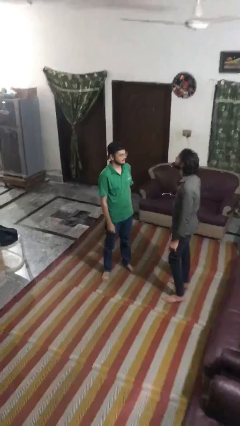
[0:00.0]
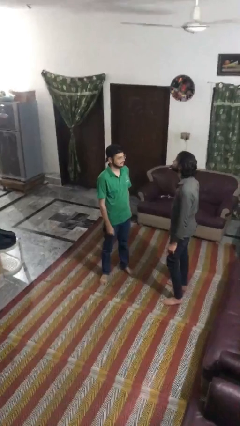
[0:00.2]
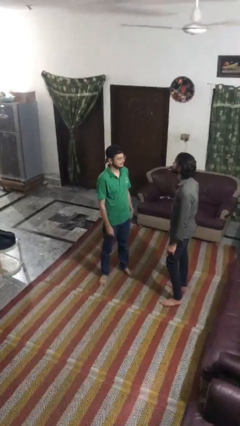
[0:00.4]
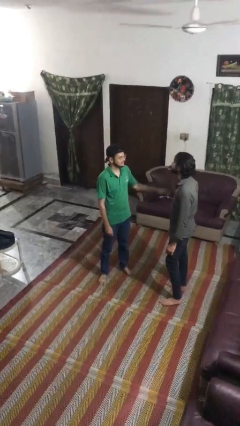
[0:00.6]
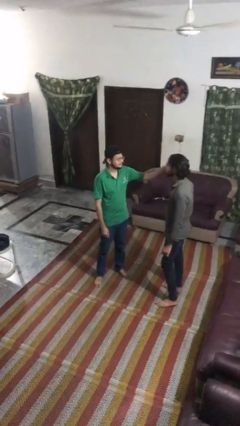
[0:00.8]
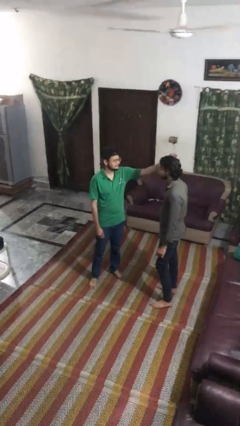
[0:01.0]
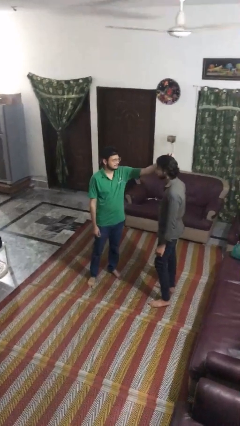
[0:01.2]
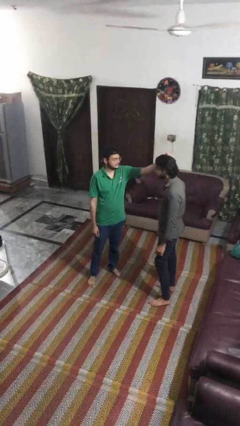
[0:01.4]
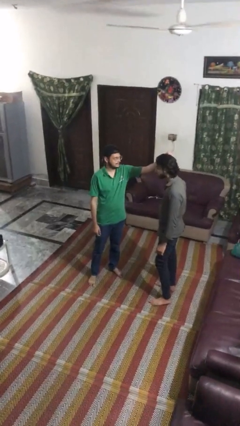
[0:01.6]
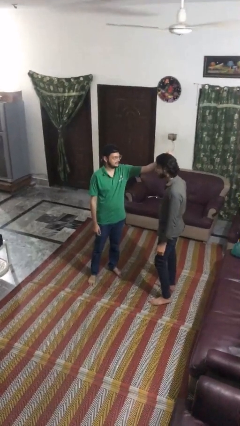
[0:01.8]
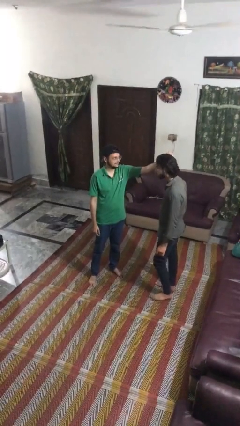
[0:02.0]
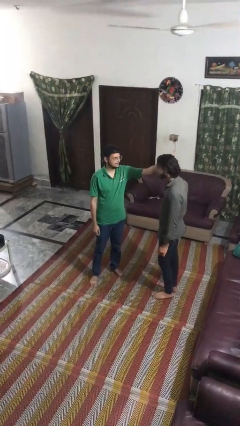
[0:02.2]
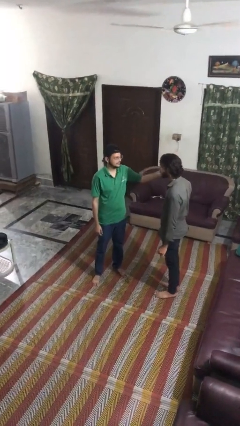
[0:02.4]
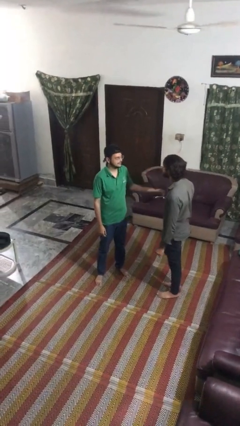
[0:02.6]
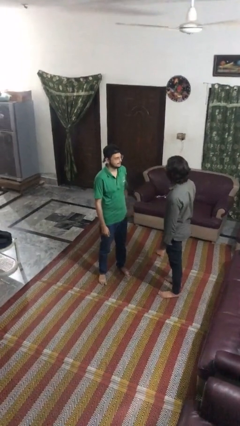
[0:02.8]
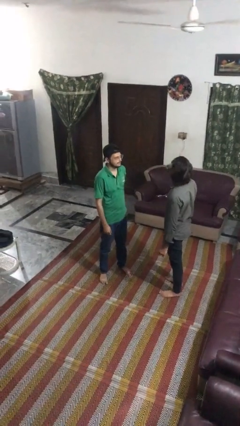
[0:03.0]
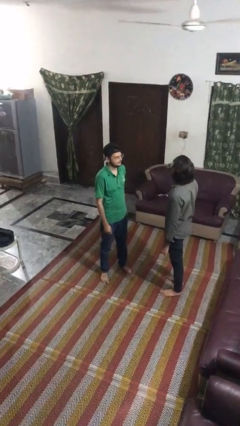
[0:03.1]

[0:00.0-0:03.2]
person grabs person by hair

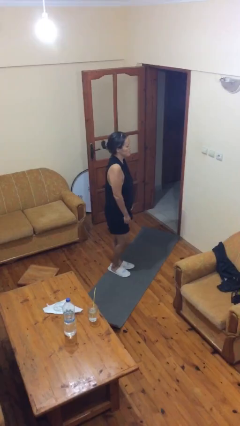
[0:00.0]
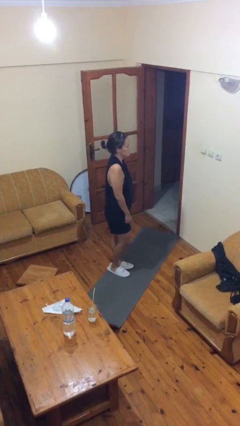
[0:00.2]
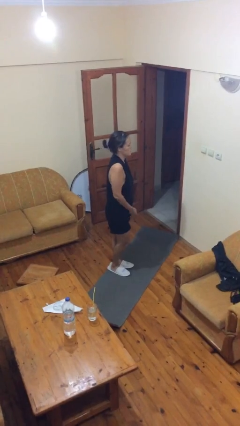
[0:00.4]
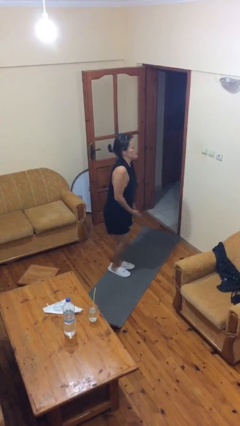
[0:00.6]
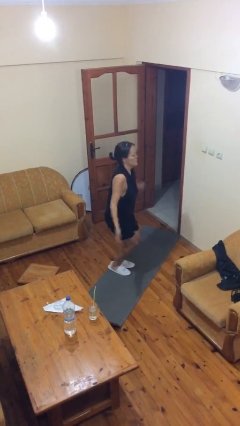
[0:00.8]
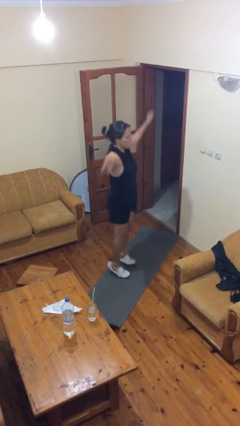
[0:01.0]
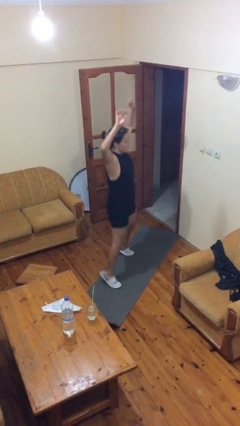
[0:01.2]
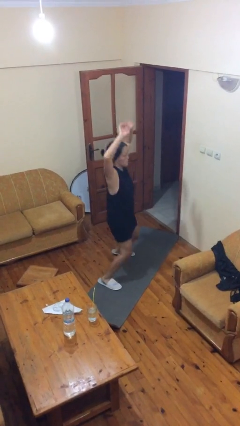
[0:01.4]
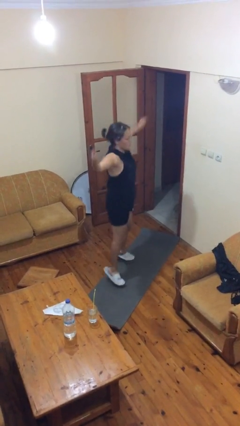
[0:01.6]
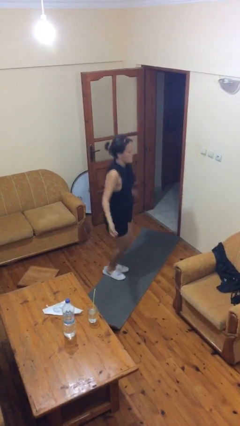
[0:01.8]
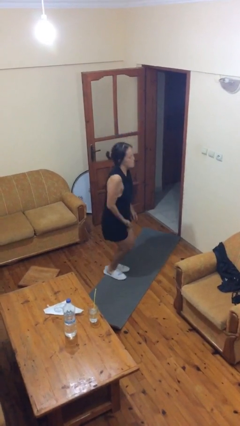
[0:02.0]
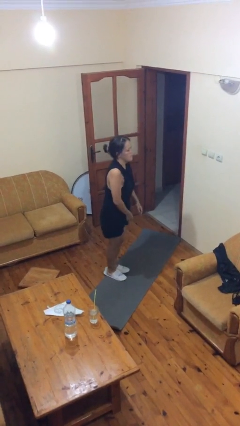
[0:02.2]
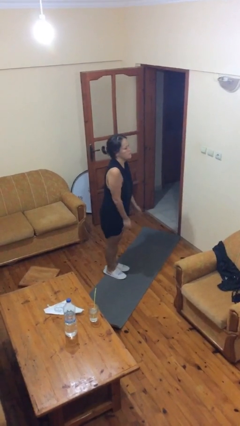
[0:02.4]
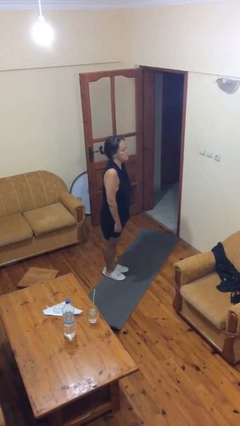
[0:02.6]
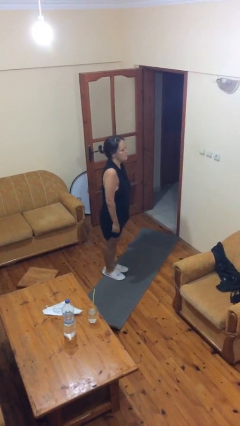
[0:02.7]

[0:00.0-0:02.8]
person exercises with jumping jacks

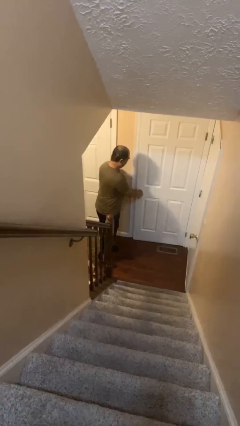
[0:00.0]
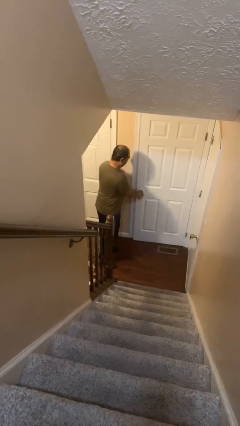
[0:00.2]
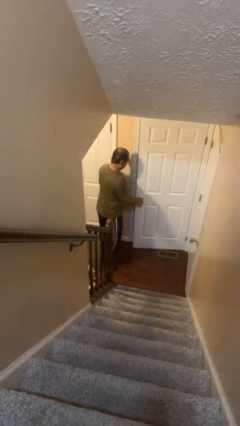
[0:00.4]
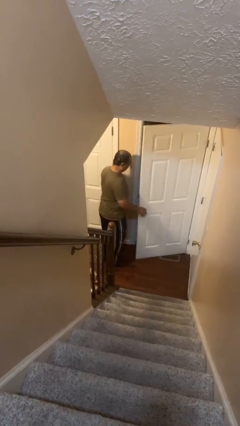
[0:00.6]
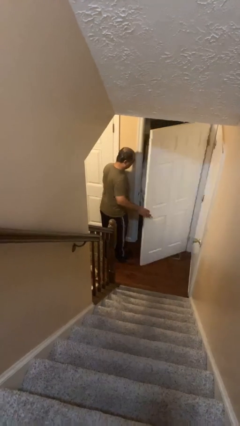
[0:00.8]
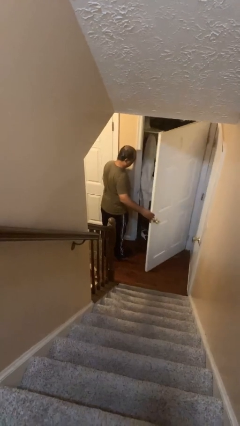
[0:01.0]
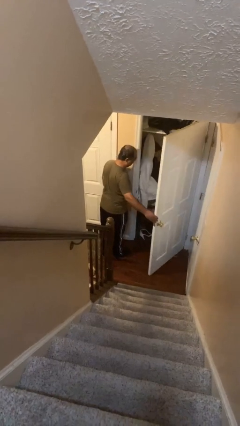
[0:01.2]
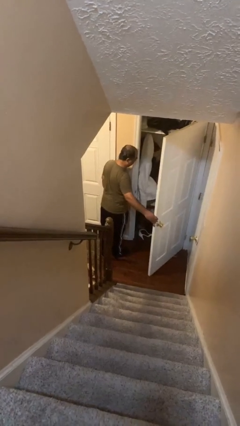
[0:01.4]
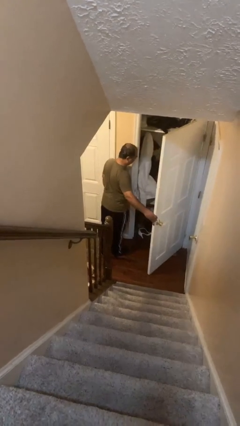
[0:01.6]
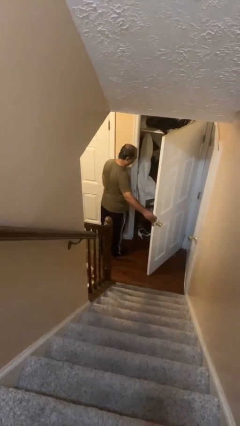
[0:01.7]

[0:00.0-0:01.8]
person opens facility door

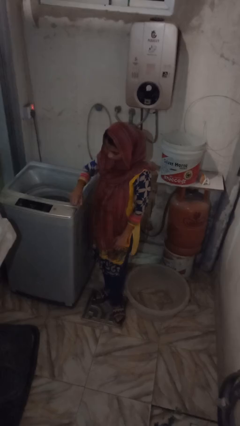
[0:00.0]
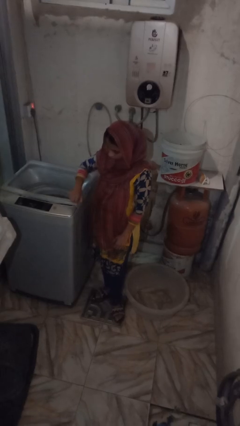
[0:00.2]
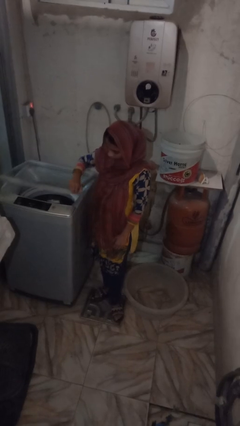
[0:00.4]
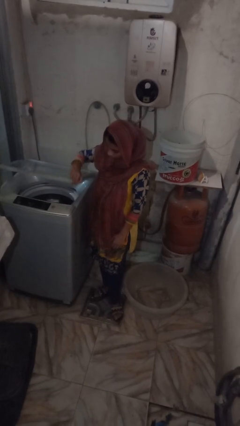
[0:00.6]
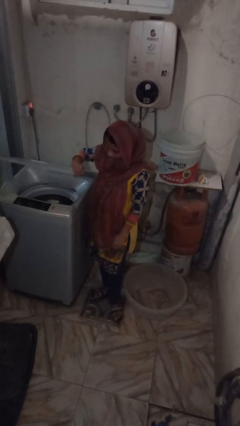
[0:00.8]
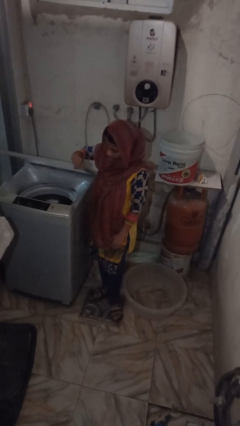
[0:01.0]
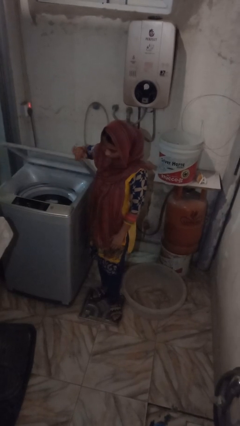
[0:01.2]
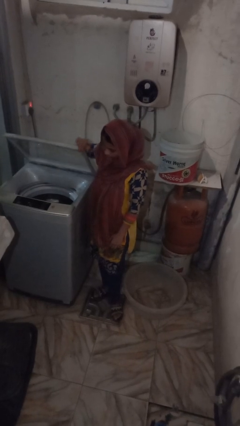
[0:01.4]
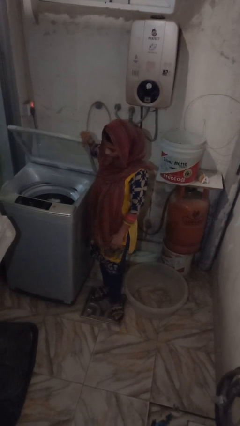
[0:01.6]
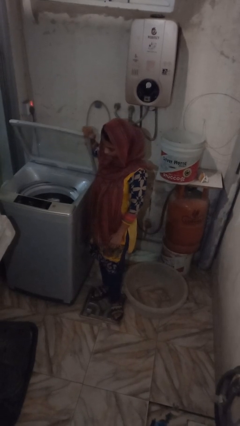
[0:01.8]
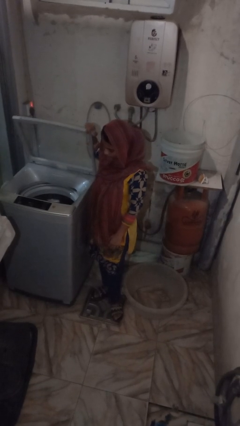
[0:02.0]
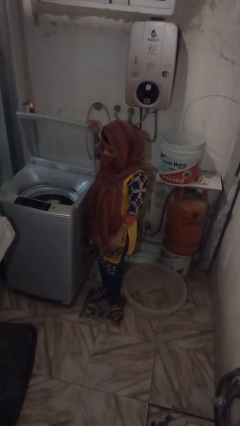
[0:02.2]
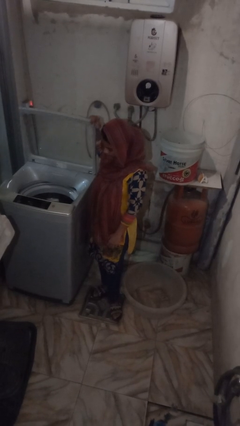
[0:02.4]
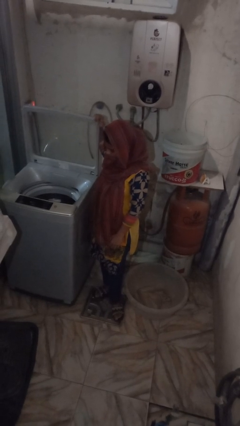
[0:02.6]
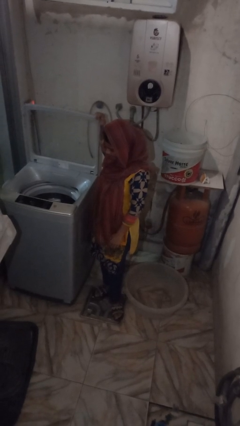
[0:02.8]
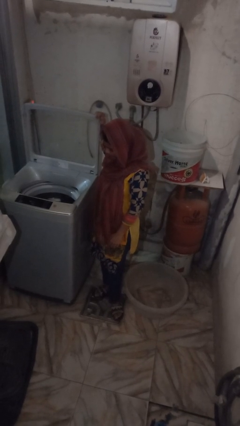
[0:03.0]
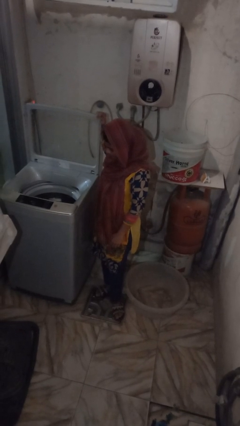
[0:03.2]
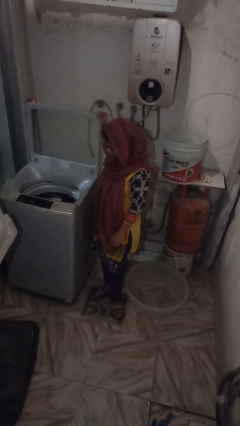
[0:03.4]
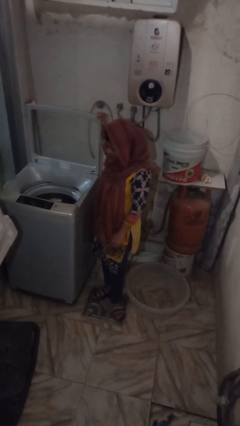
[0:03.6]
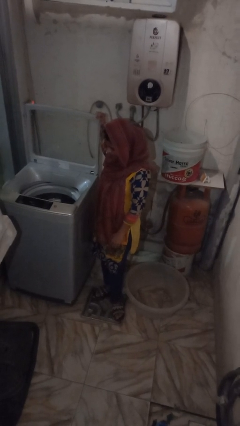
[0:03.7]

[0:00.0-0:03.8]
person opens clothes washer

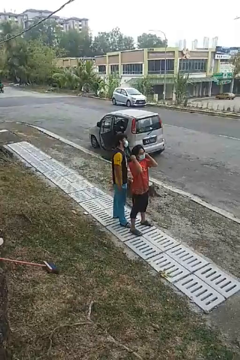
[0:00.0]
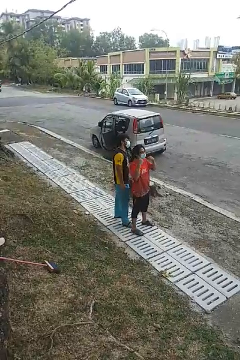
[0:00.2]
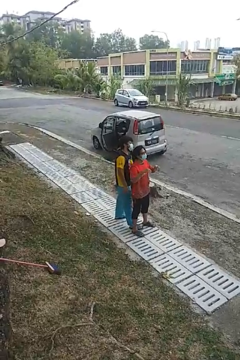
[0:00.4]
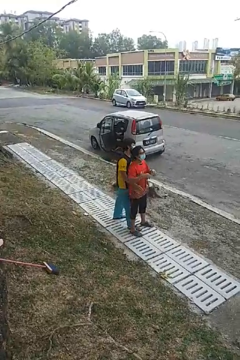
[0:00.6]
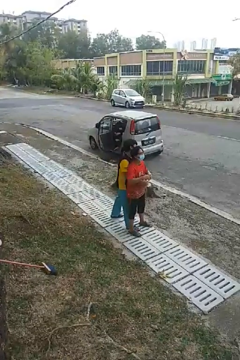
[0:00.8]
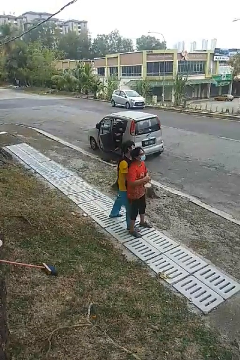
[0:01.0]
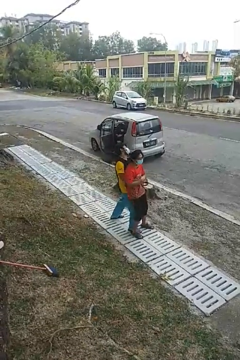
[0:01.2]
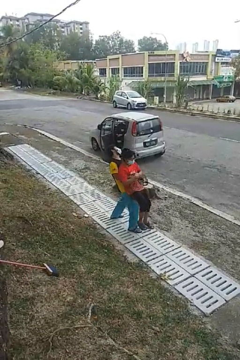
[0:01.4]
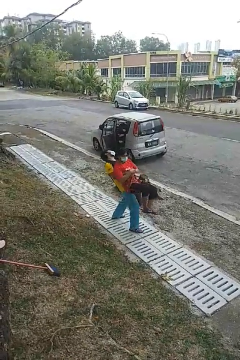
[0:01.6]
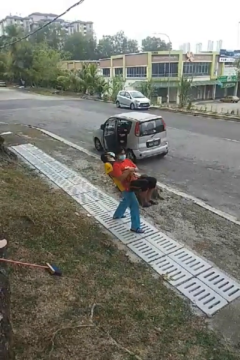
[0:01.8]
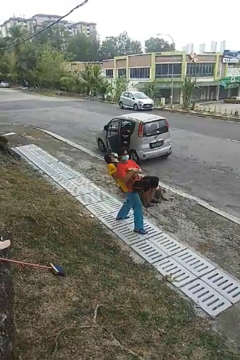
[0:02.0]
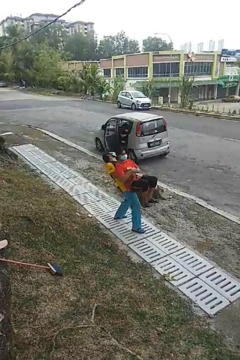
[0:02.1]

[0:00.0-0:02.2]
person picks up person

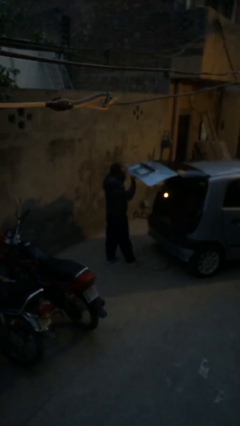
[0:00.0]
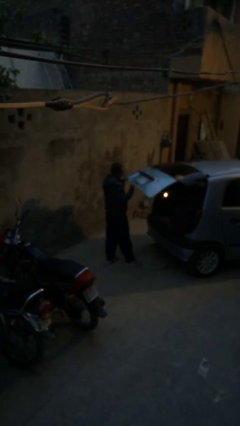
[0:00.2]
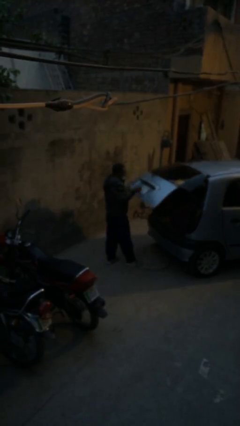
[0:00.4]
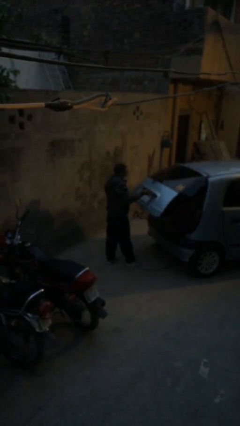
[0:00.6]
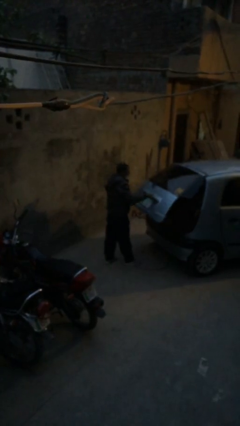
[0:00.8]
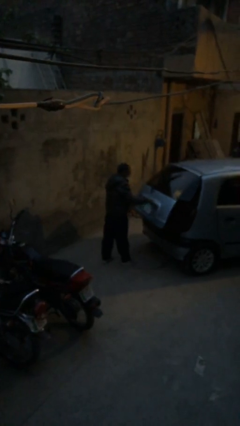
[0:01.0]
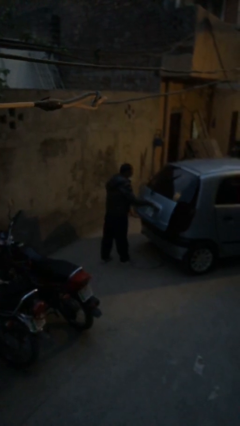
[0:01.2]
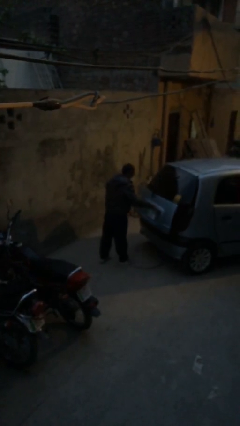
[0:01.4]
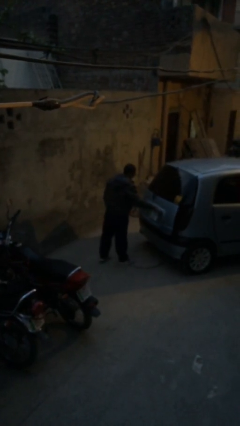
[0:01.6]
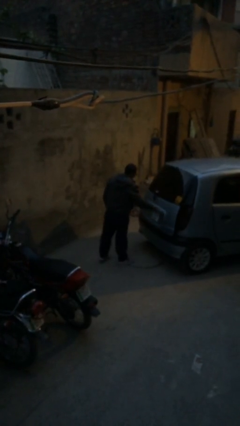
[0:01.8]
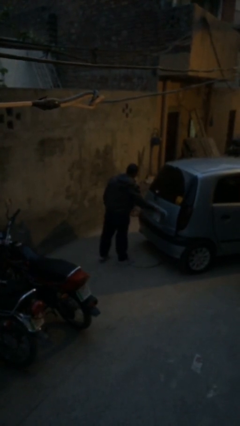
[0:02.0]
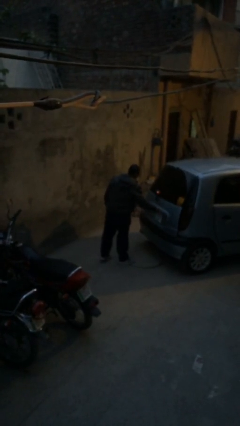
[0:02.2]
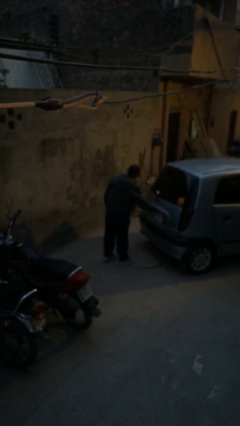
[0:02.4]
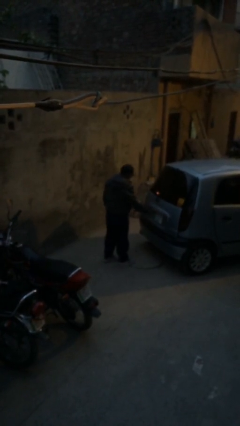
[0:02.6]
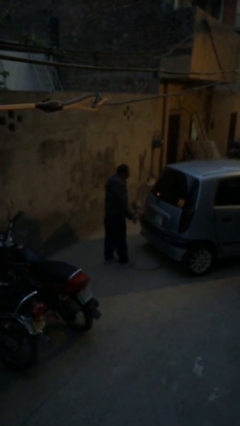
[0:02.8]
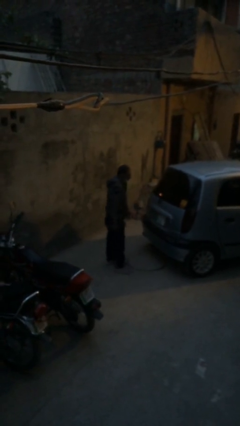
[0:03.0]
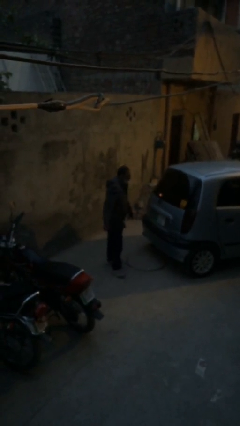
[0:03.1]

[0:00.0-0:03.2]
person closes car trunk

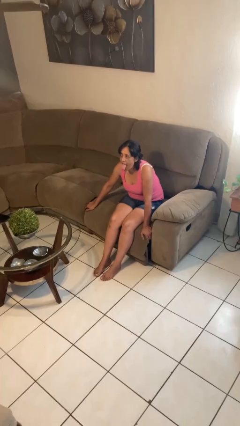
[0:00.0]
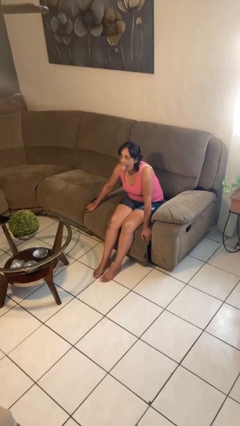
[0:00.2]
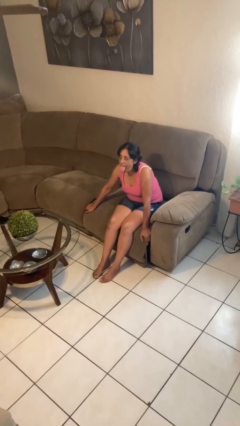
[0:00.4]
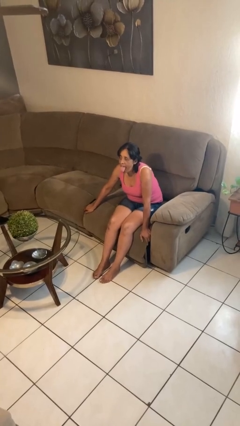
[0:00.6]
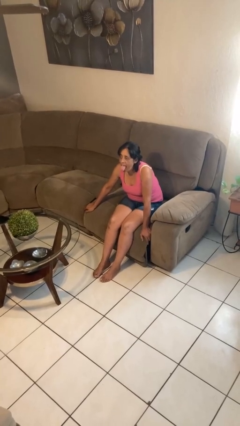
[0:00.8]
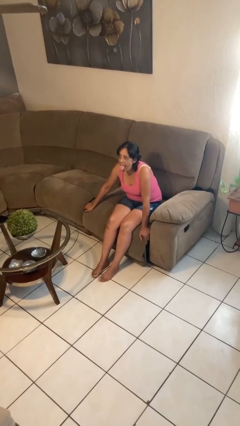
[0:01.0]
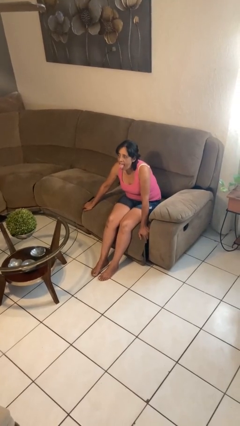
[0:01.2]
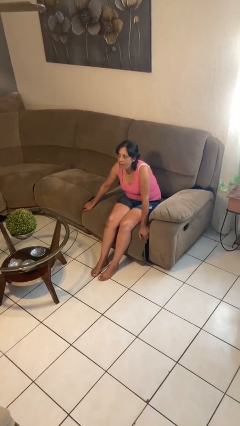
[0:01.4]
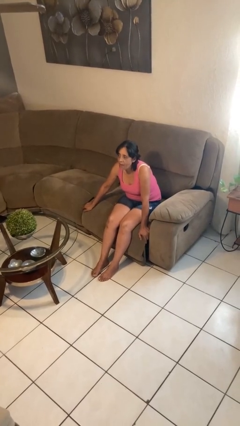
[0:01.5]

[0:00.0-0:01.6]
person sticks out tongue
